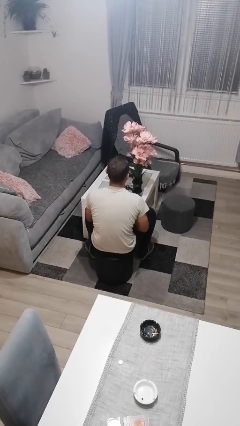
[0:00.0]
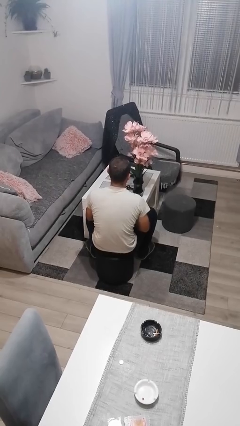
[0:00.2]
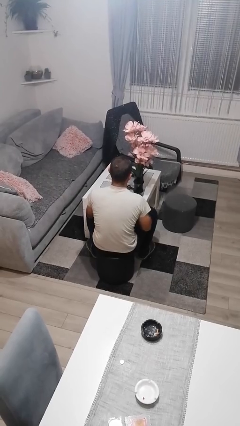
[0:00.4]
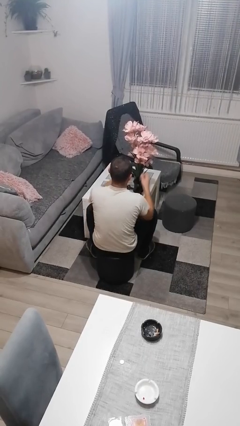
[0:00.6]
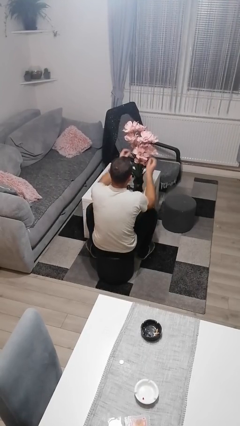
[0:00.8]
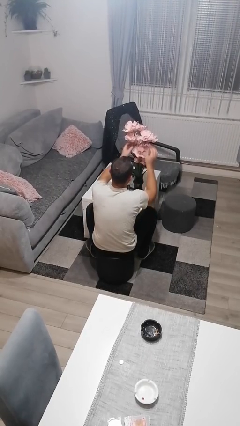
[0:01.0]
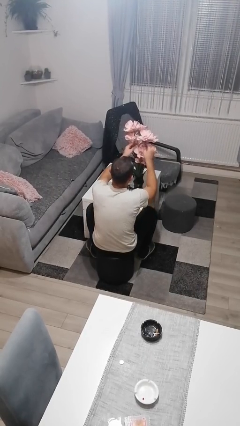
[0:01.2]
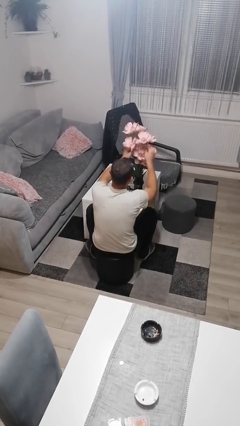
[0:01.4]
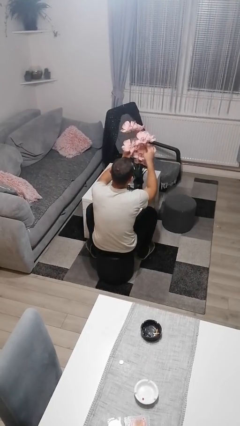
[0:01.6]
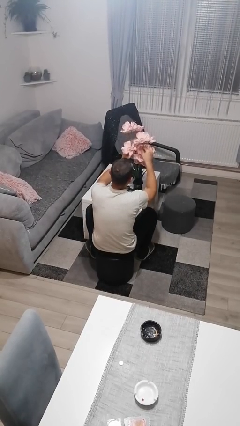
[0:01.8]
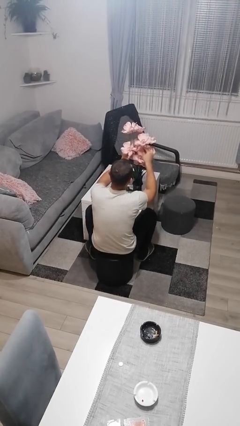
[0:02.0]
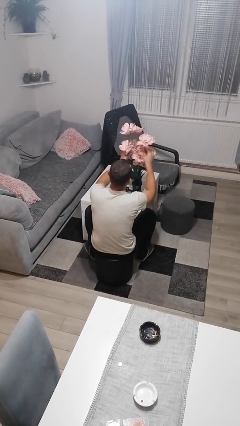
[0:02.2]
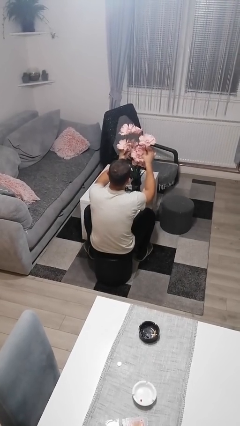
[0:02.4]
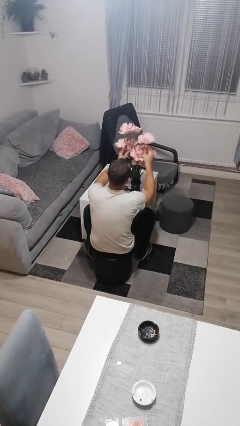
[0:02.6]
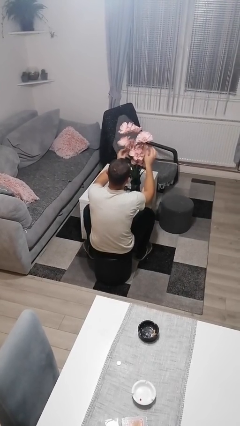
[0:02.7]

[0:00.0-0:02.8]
person arranges flowers in vase

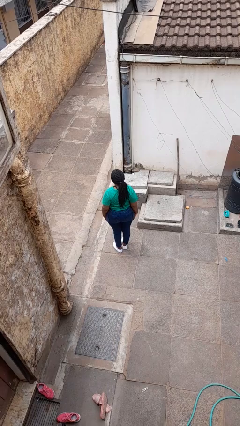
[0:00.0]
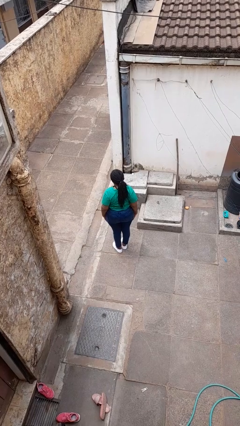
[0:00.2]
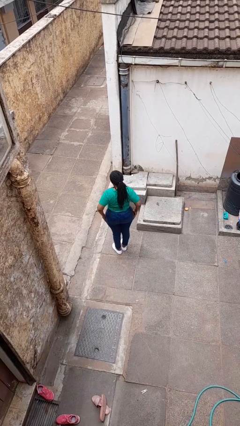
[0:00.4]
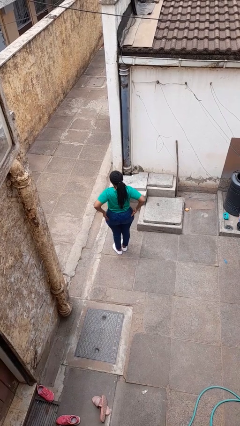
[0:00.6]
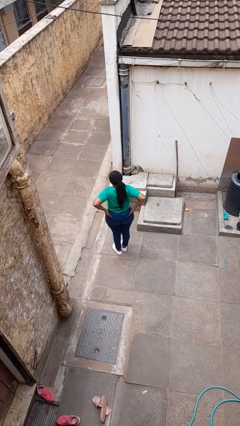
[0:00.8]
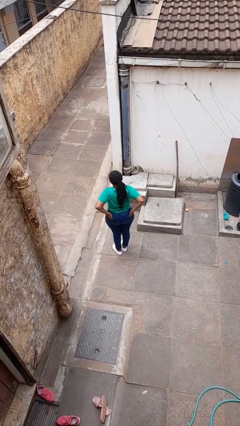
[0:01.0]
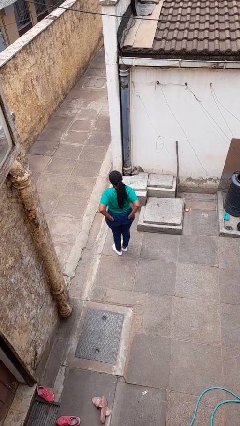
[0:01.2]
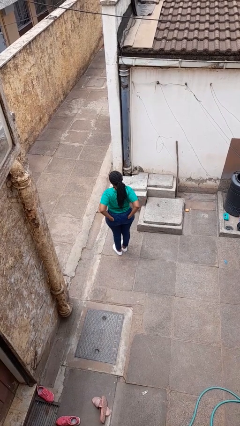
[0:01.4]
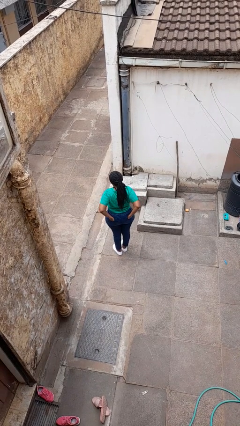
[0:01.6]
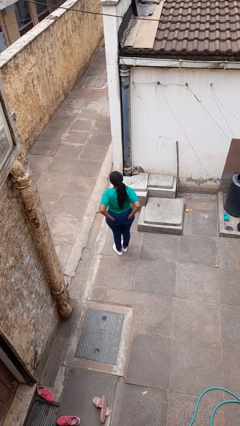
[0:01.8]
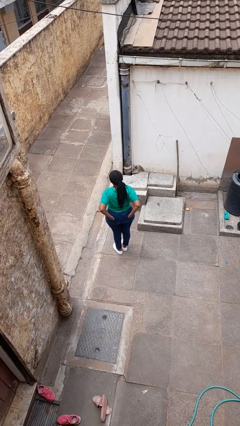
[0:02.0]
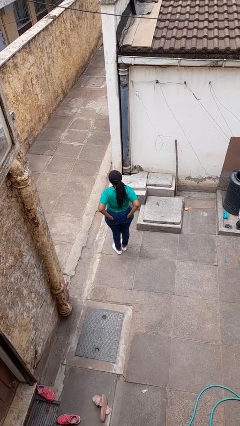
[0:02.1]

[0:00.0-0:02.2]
person puts hands in back pockets

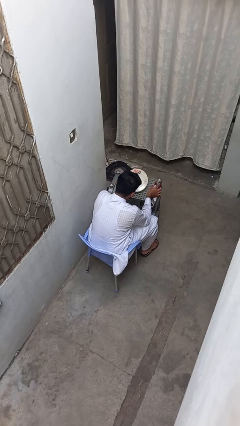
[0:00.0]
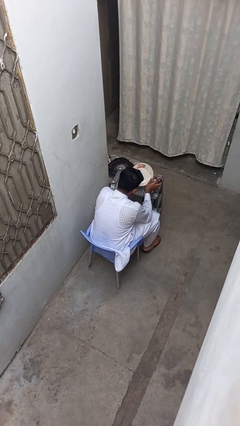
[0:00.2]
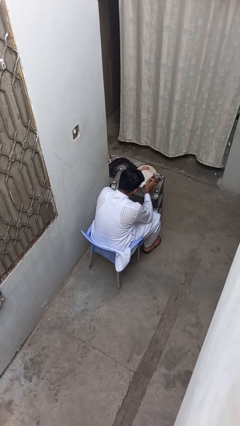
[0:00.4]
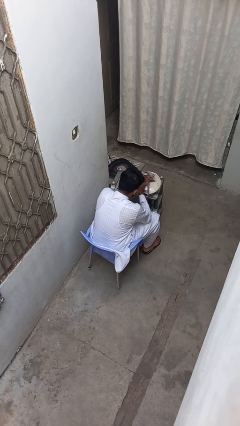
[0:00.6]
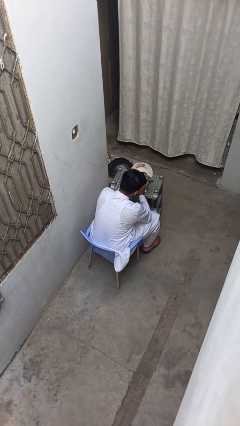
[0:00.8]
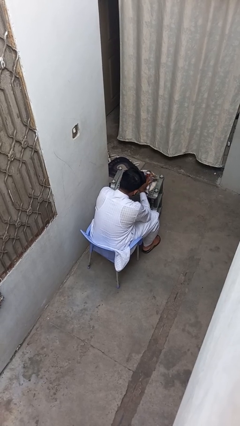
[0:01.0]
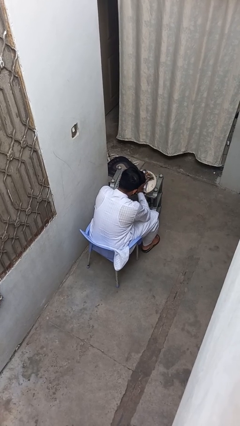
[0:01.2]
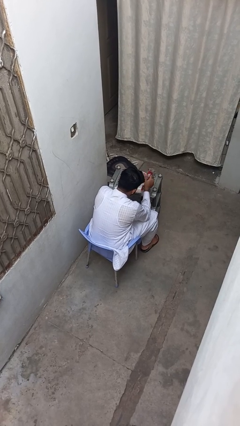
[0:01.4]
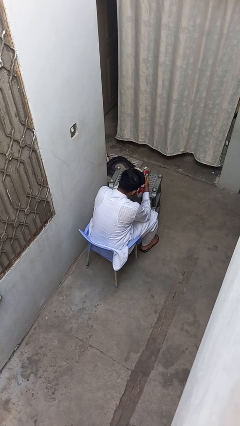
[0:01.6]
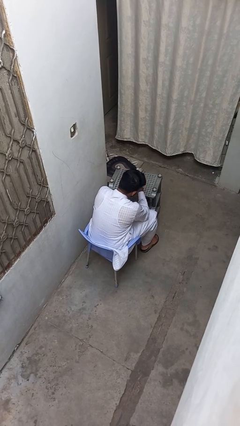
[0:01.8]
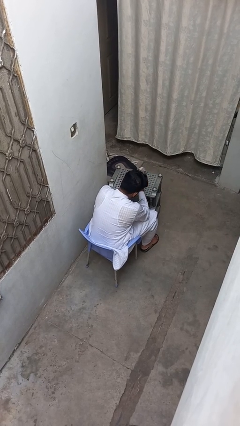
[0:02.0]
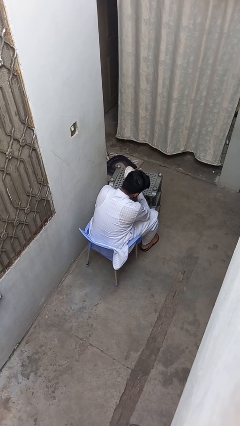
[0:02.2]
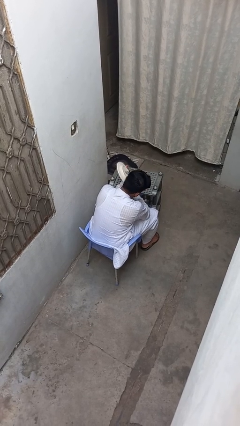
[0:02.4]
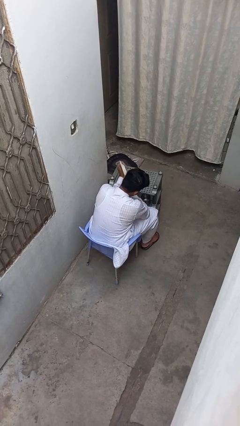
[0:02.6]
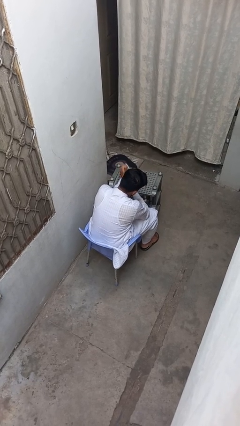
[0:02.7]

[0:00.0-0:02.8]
person dries dish

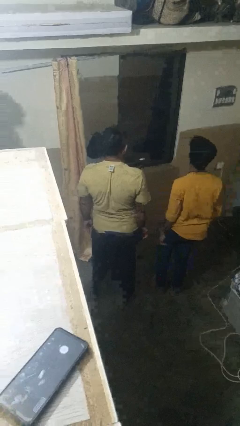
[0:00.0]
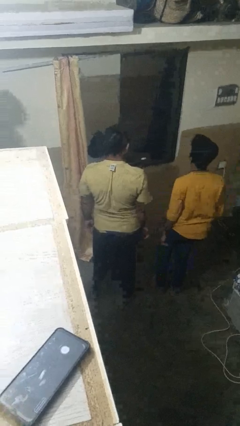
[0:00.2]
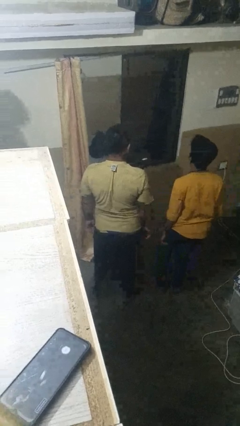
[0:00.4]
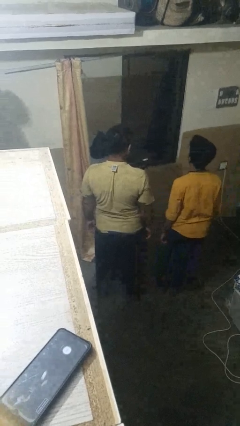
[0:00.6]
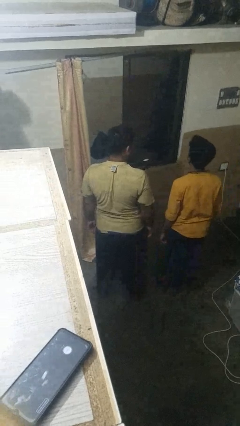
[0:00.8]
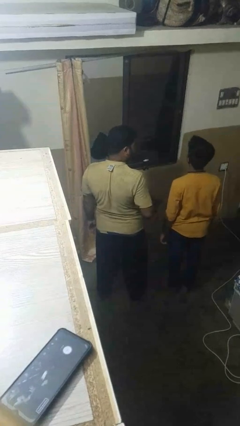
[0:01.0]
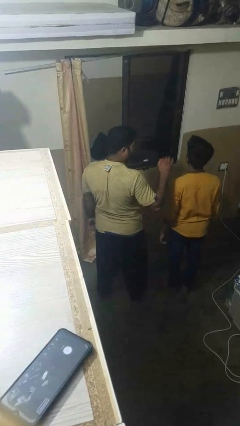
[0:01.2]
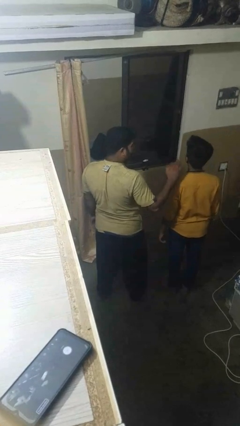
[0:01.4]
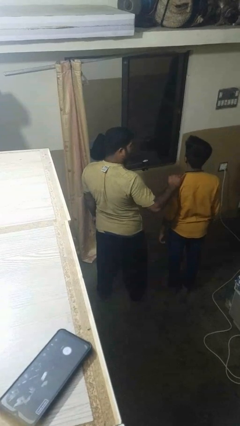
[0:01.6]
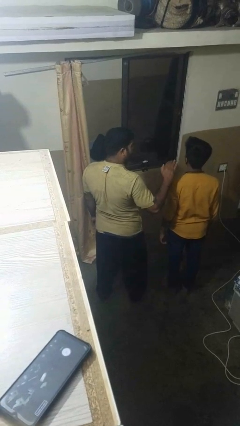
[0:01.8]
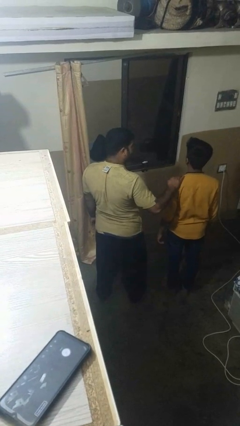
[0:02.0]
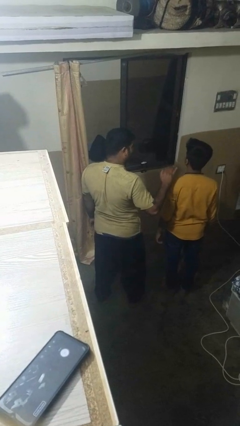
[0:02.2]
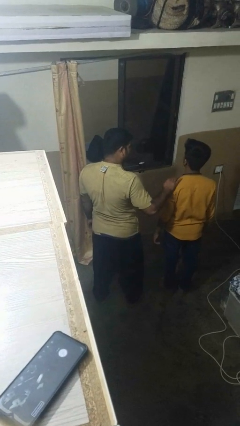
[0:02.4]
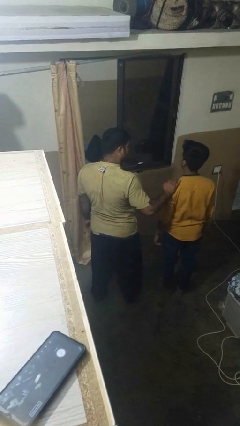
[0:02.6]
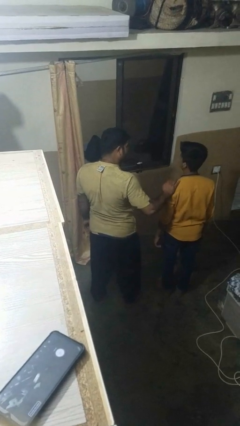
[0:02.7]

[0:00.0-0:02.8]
person pounds shoulders of person

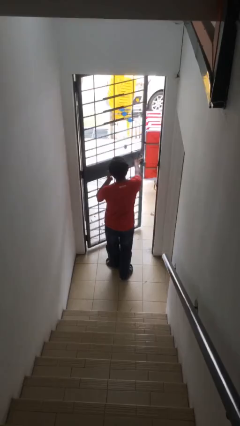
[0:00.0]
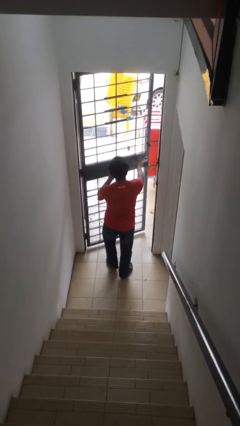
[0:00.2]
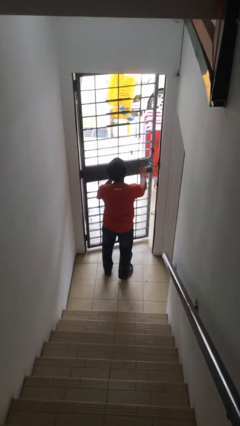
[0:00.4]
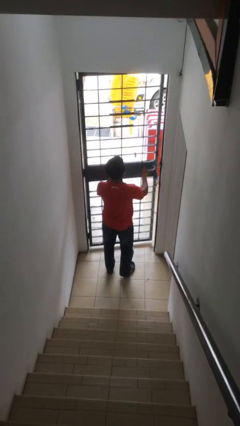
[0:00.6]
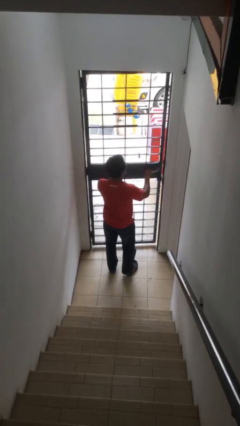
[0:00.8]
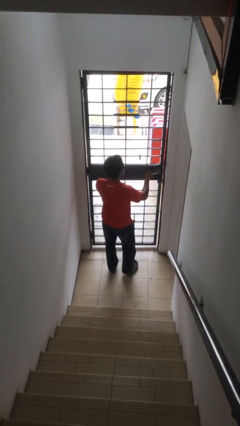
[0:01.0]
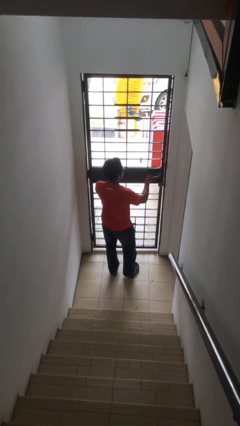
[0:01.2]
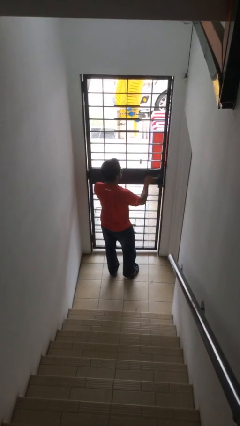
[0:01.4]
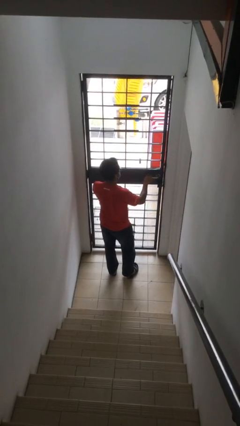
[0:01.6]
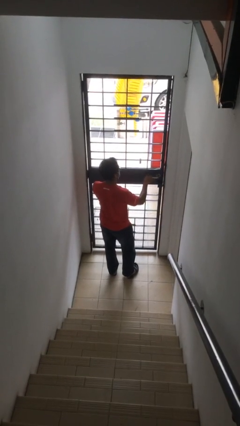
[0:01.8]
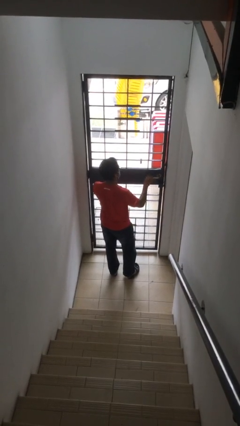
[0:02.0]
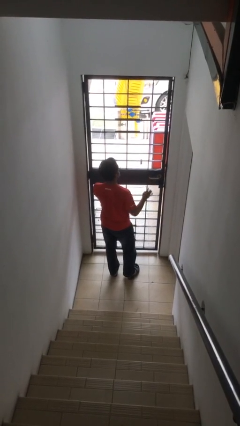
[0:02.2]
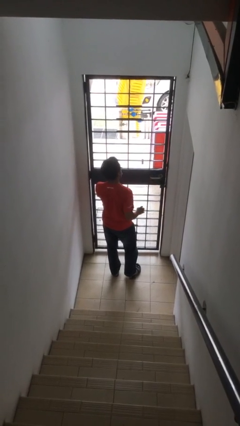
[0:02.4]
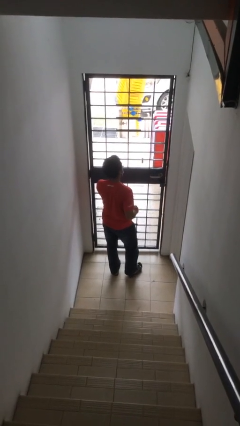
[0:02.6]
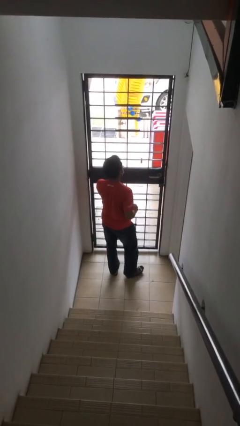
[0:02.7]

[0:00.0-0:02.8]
person closes facility door

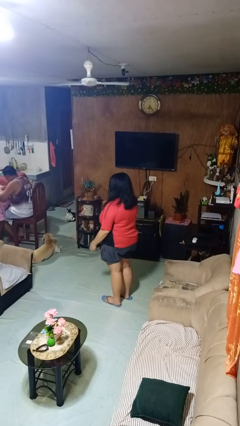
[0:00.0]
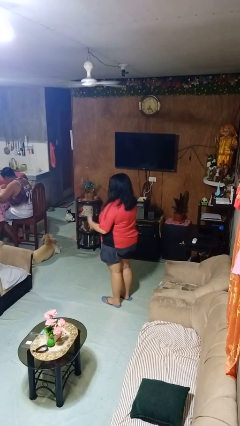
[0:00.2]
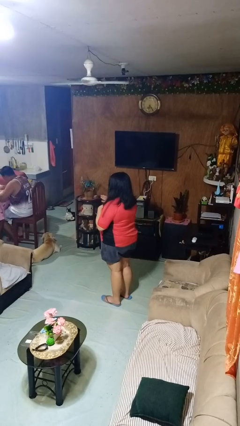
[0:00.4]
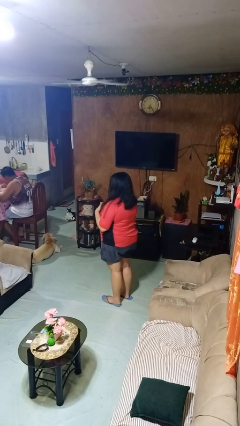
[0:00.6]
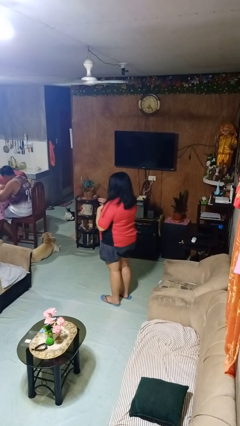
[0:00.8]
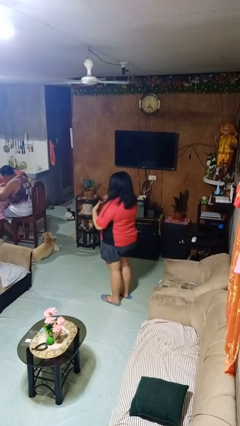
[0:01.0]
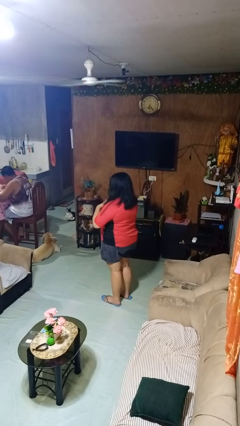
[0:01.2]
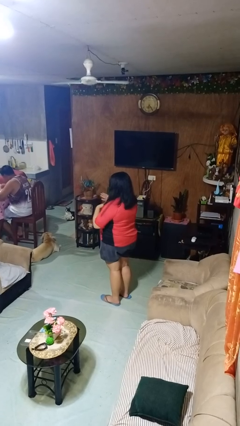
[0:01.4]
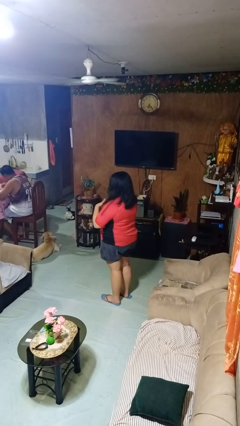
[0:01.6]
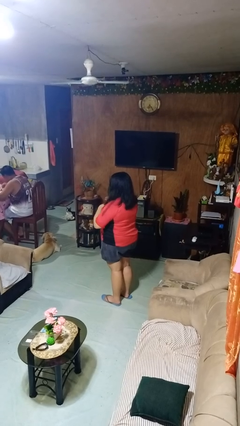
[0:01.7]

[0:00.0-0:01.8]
person drums on chest

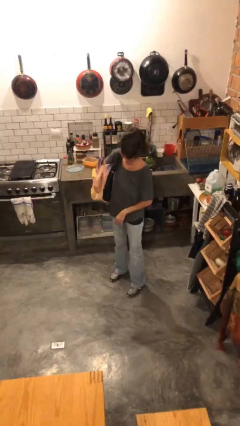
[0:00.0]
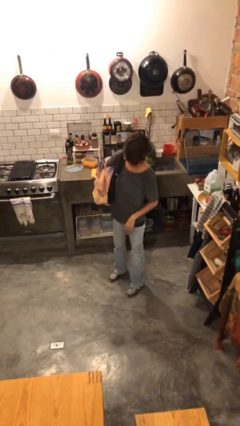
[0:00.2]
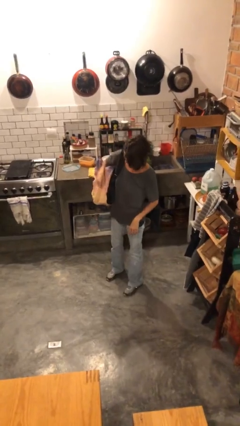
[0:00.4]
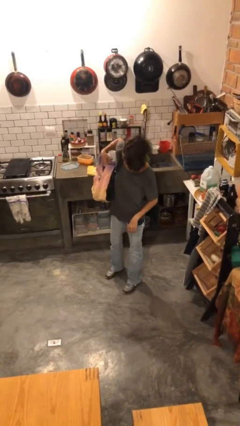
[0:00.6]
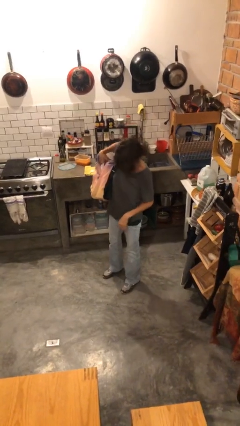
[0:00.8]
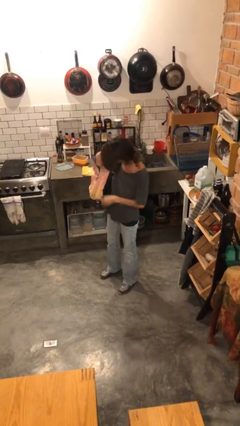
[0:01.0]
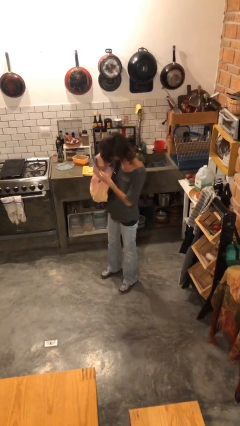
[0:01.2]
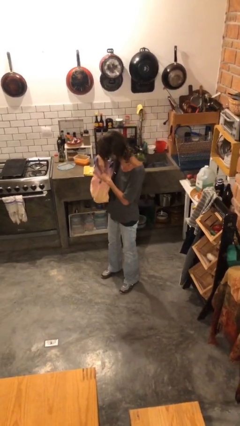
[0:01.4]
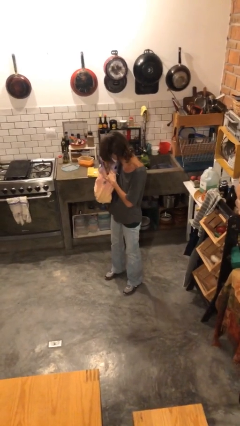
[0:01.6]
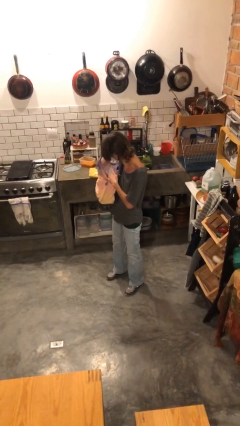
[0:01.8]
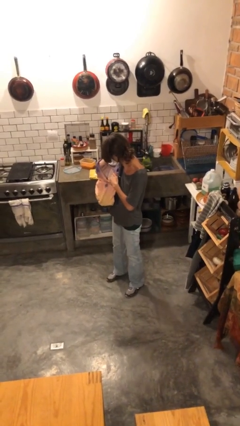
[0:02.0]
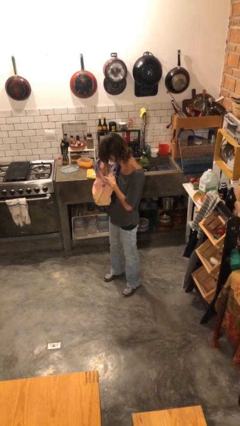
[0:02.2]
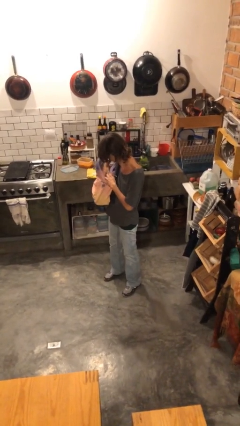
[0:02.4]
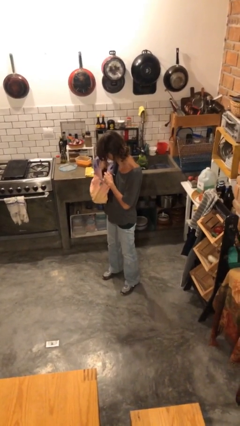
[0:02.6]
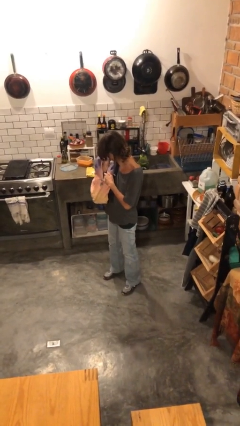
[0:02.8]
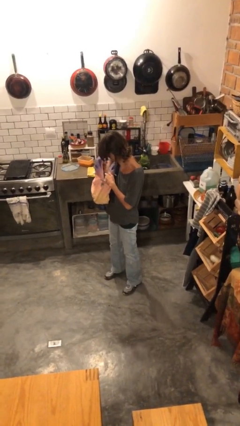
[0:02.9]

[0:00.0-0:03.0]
person searches in backpack
